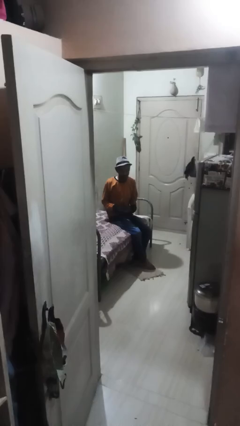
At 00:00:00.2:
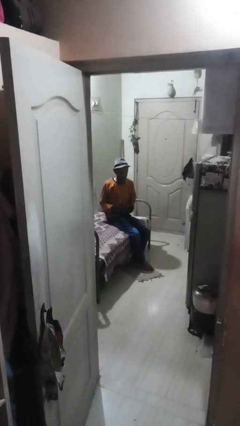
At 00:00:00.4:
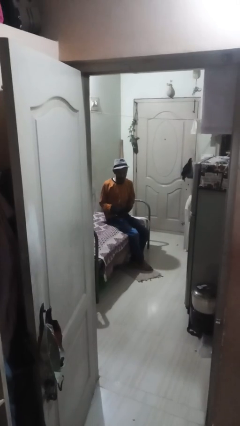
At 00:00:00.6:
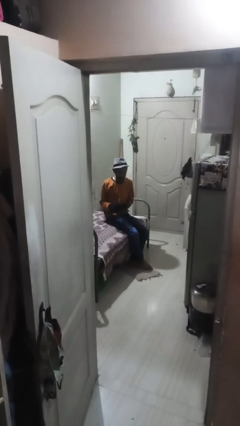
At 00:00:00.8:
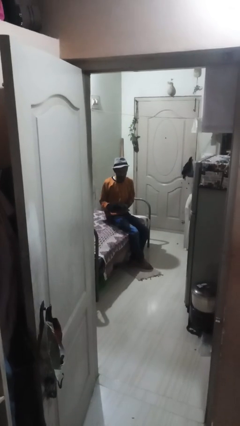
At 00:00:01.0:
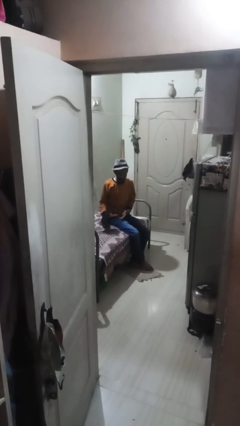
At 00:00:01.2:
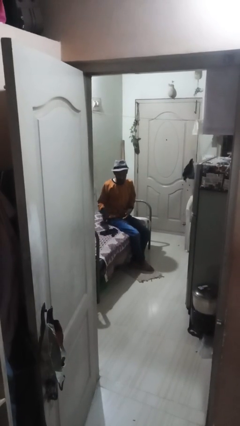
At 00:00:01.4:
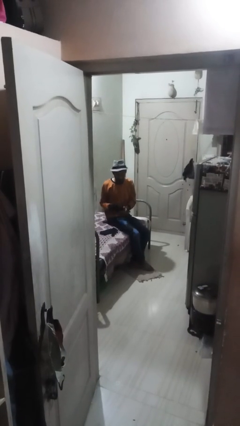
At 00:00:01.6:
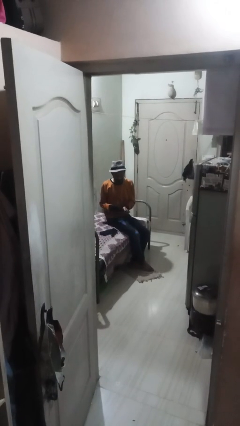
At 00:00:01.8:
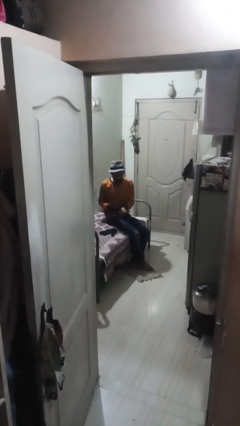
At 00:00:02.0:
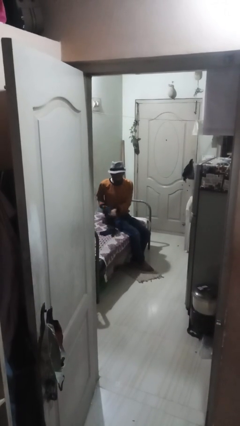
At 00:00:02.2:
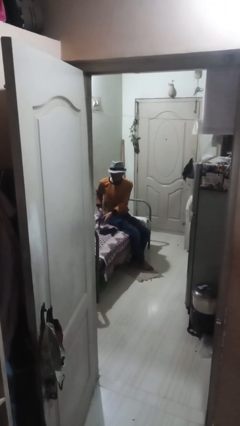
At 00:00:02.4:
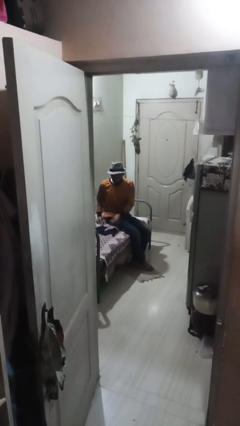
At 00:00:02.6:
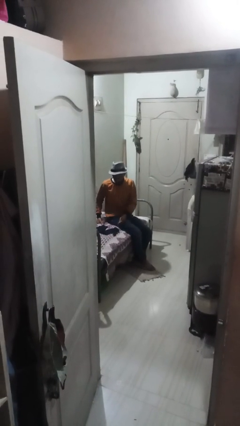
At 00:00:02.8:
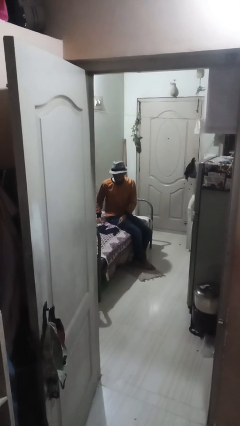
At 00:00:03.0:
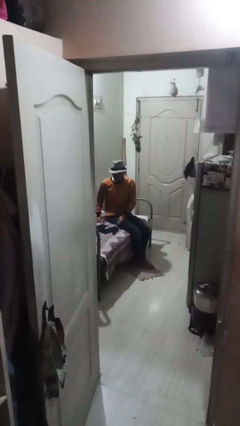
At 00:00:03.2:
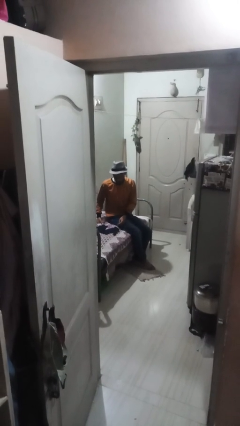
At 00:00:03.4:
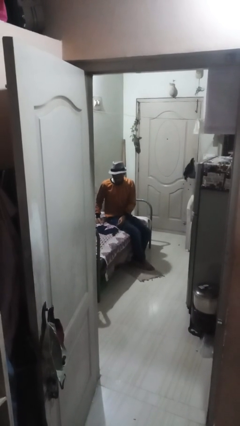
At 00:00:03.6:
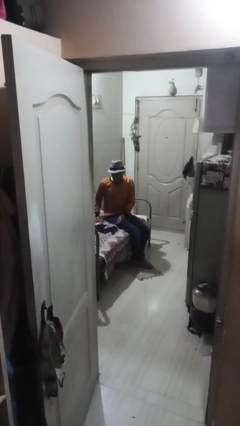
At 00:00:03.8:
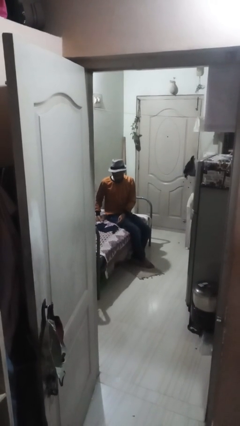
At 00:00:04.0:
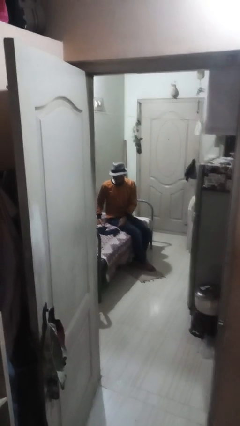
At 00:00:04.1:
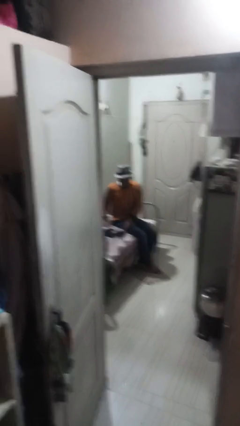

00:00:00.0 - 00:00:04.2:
person takes off gloves

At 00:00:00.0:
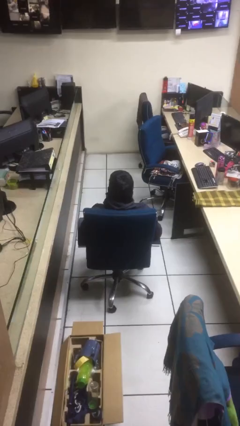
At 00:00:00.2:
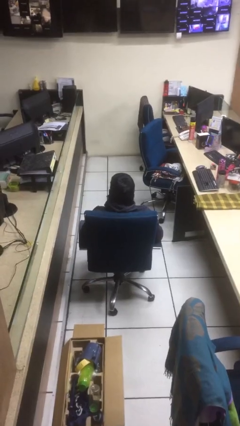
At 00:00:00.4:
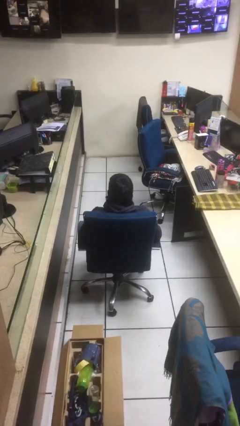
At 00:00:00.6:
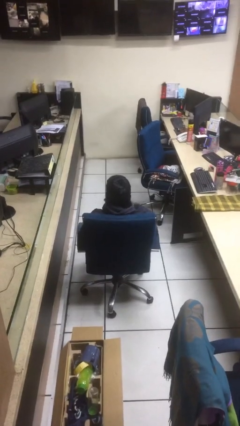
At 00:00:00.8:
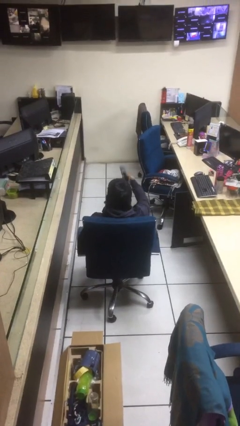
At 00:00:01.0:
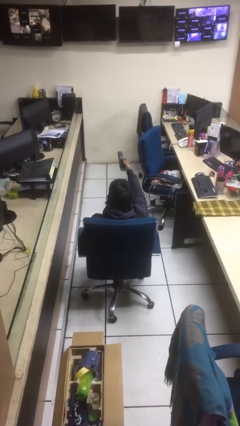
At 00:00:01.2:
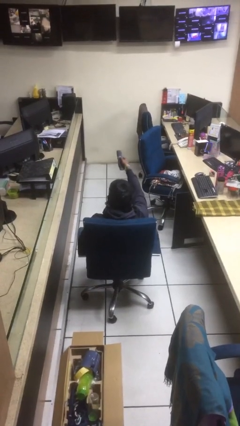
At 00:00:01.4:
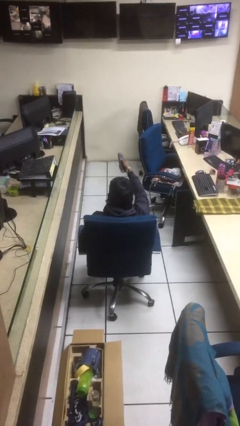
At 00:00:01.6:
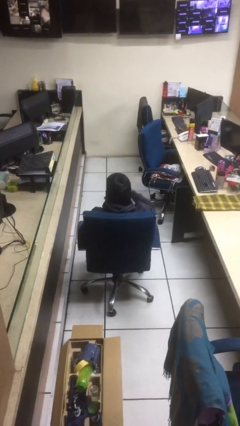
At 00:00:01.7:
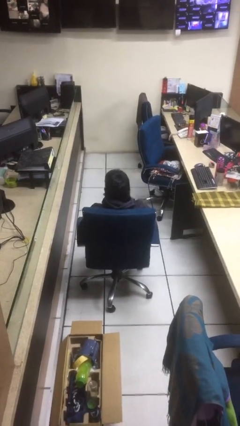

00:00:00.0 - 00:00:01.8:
person uses television remote

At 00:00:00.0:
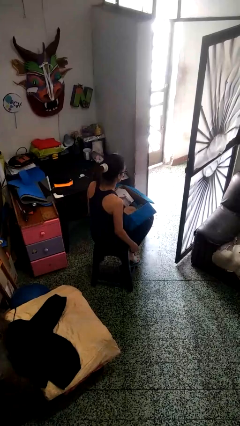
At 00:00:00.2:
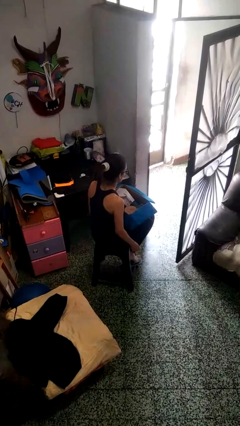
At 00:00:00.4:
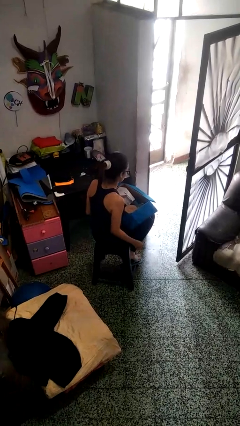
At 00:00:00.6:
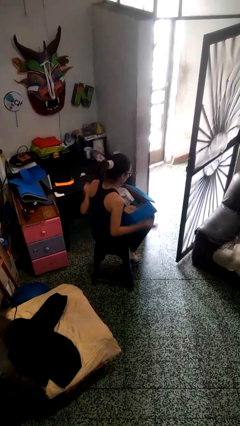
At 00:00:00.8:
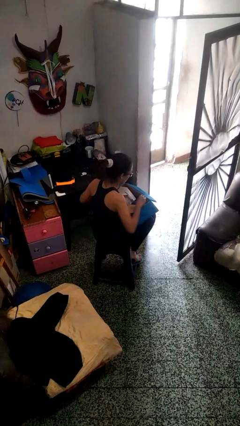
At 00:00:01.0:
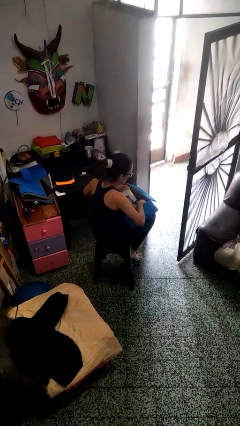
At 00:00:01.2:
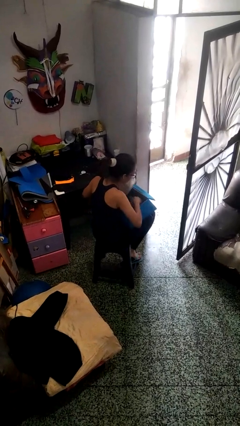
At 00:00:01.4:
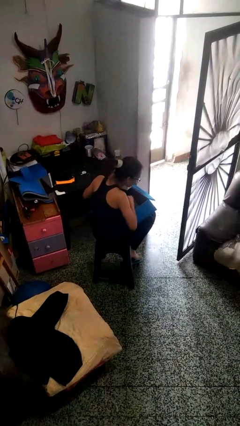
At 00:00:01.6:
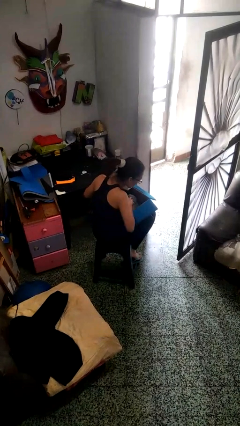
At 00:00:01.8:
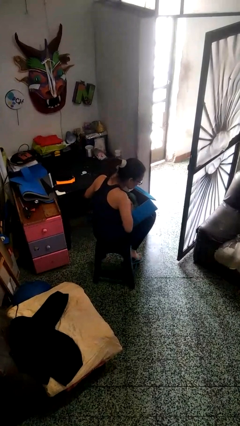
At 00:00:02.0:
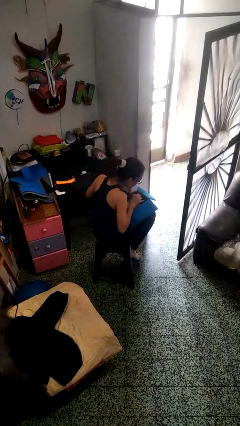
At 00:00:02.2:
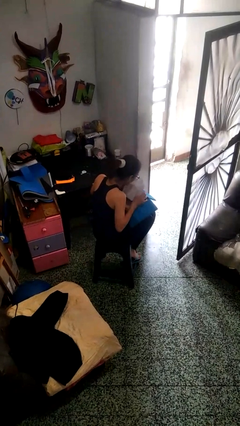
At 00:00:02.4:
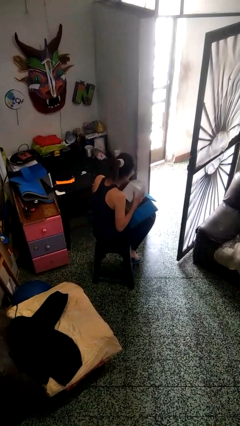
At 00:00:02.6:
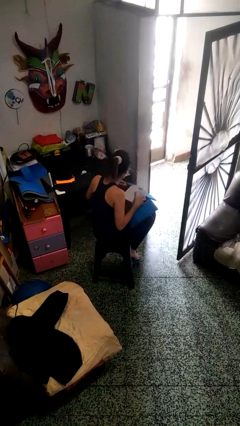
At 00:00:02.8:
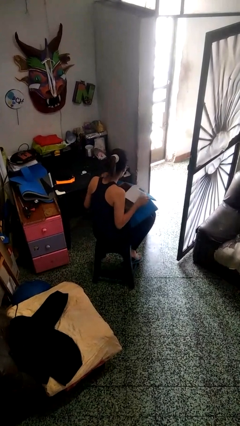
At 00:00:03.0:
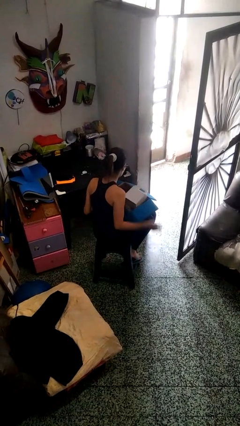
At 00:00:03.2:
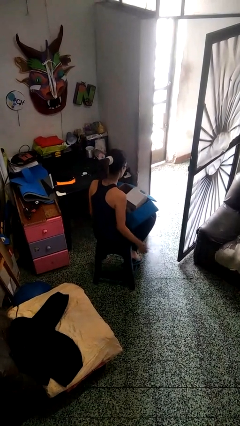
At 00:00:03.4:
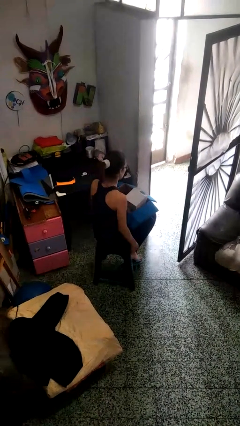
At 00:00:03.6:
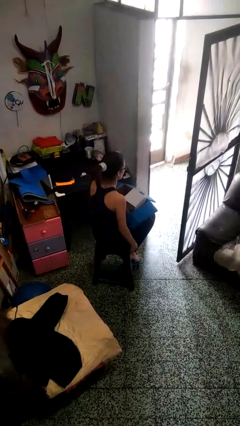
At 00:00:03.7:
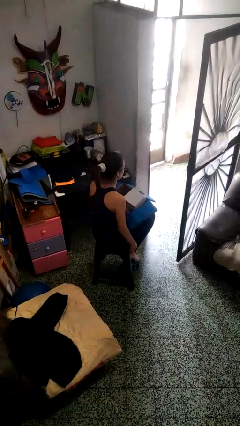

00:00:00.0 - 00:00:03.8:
person searches in box

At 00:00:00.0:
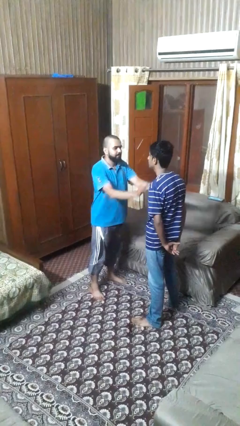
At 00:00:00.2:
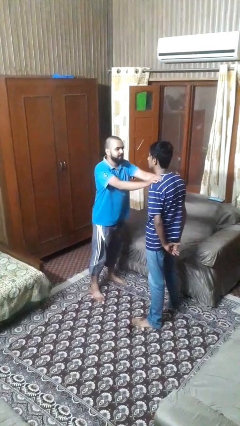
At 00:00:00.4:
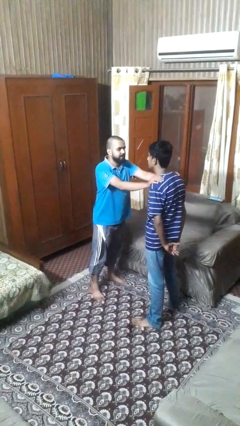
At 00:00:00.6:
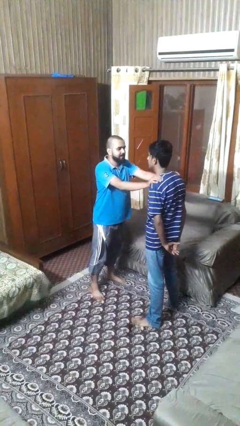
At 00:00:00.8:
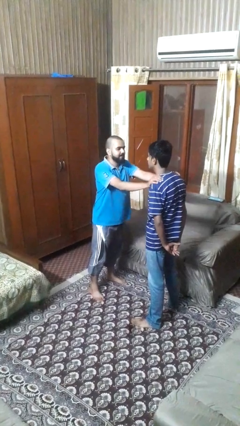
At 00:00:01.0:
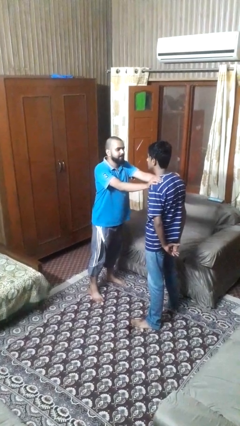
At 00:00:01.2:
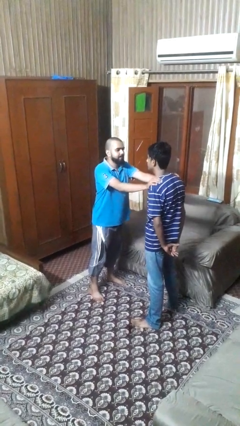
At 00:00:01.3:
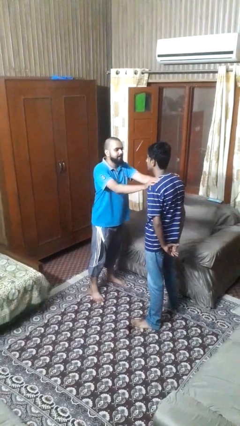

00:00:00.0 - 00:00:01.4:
person pounds shoulders of person

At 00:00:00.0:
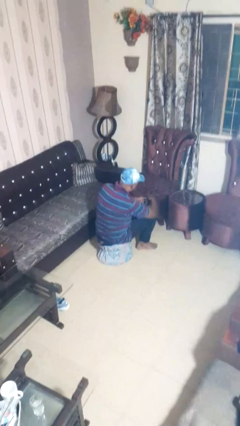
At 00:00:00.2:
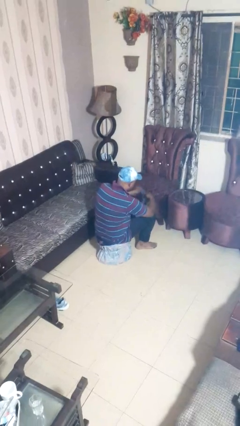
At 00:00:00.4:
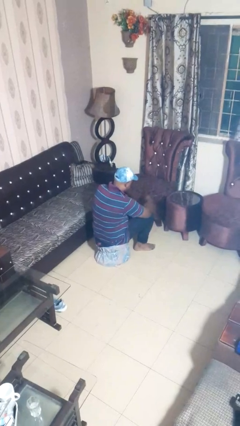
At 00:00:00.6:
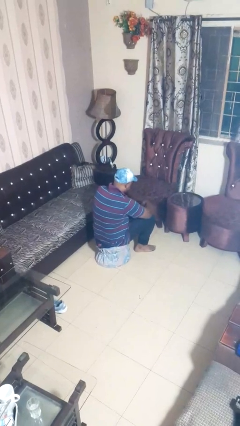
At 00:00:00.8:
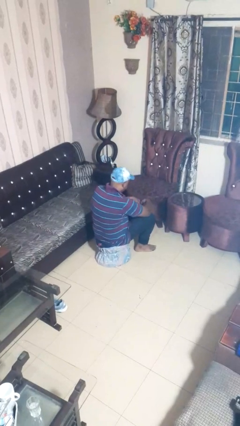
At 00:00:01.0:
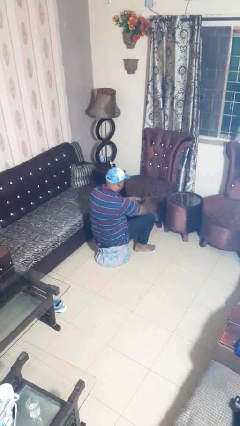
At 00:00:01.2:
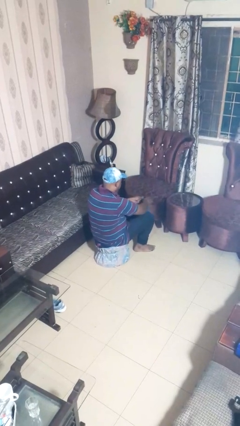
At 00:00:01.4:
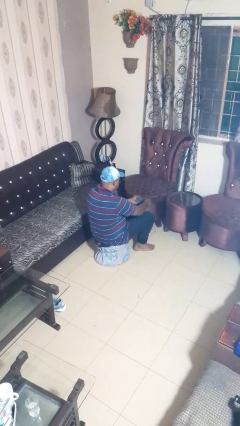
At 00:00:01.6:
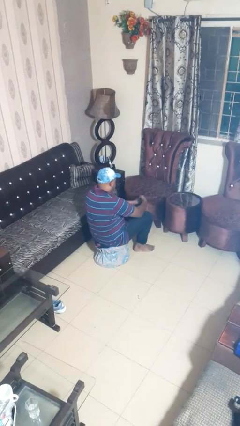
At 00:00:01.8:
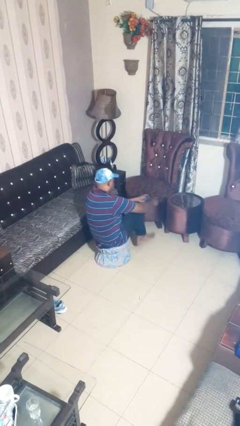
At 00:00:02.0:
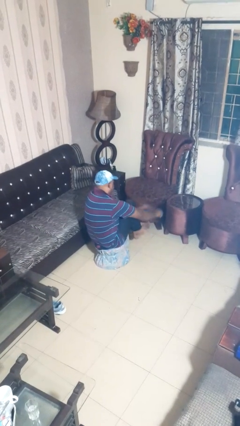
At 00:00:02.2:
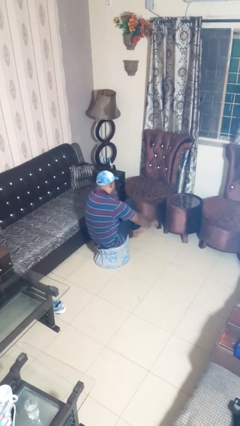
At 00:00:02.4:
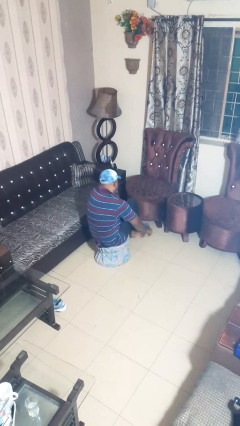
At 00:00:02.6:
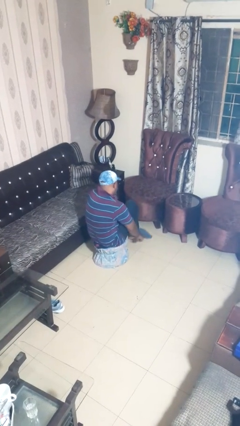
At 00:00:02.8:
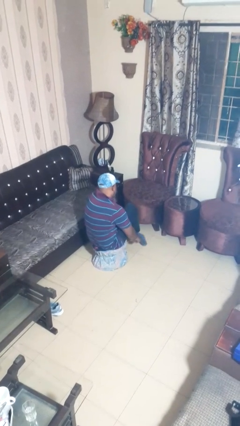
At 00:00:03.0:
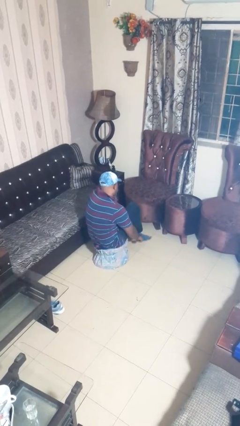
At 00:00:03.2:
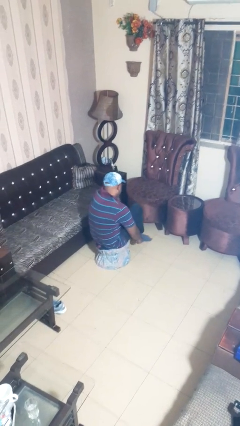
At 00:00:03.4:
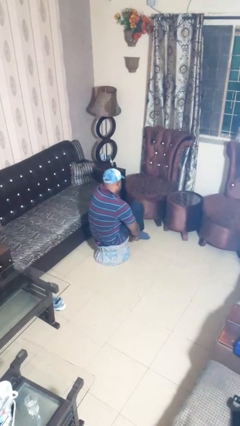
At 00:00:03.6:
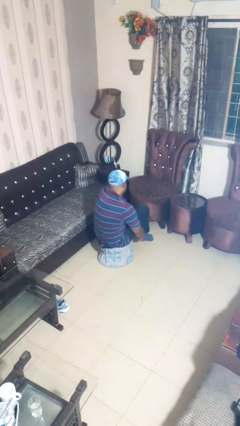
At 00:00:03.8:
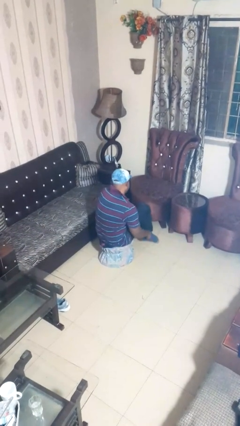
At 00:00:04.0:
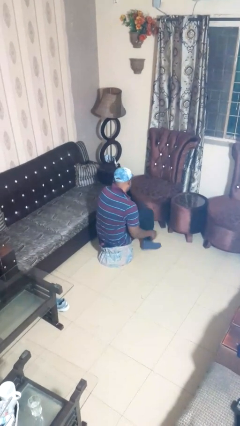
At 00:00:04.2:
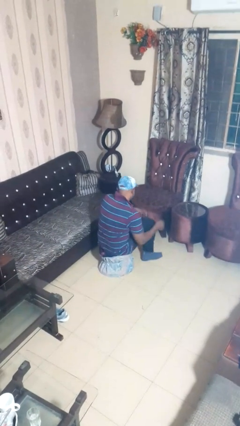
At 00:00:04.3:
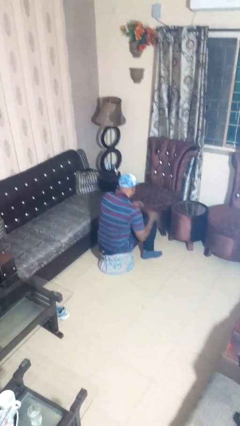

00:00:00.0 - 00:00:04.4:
person puts on socks

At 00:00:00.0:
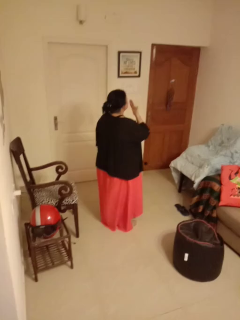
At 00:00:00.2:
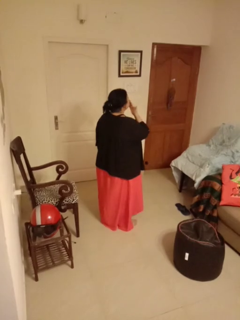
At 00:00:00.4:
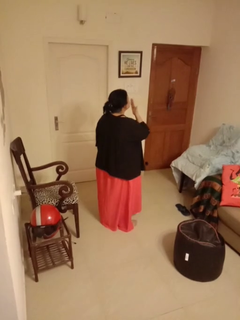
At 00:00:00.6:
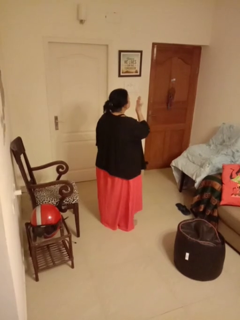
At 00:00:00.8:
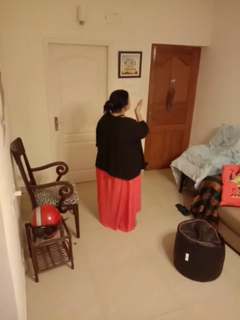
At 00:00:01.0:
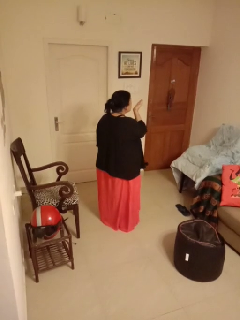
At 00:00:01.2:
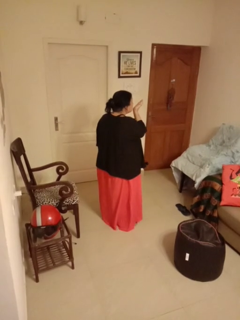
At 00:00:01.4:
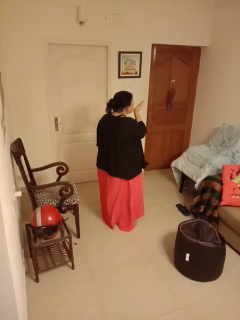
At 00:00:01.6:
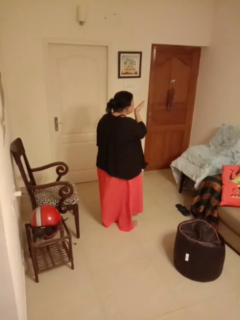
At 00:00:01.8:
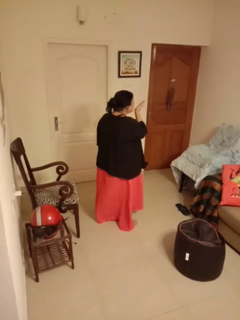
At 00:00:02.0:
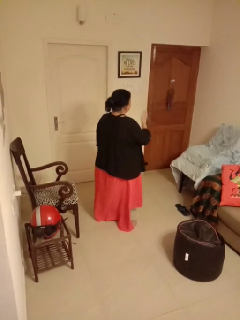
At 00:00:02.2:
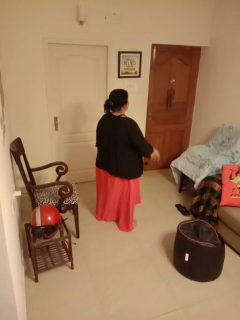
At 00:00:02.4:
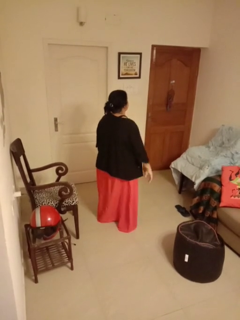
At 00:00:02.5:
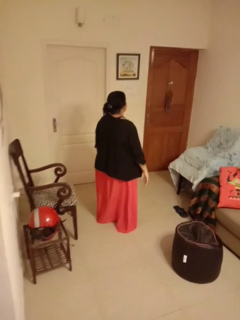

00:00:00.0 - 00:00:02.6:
person gestures blow kiss
